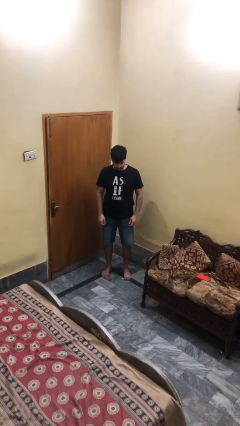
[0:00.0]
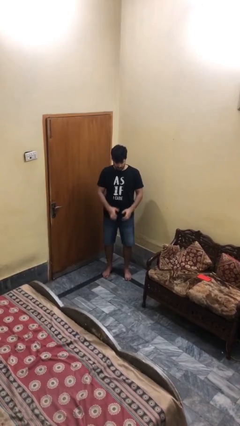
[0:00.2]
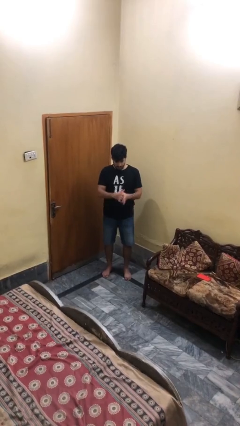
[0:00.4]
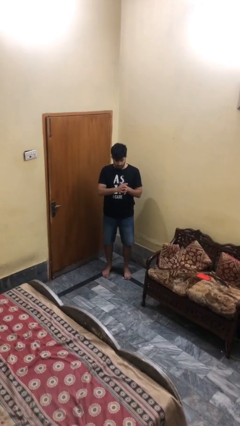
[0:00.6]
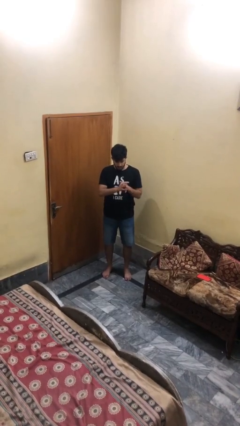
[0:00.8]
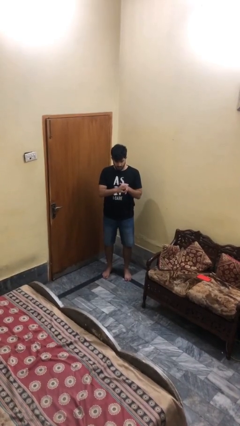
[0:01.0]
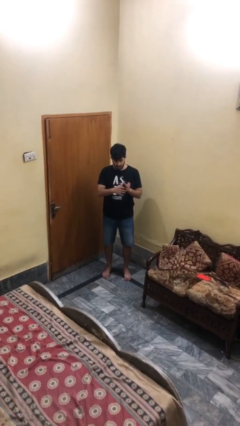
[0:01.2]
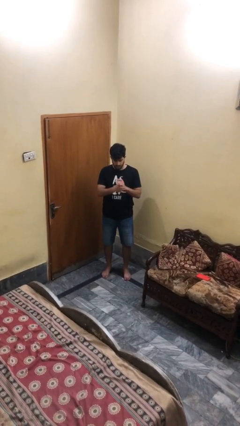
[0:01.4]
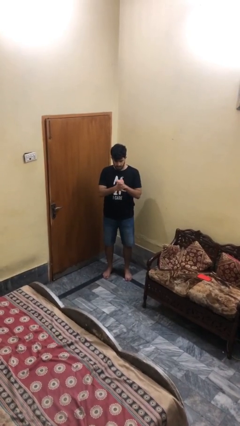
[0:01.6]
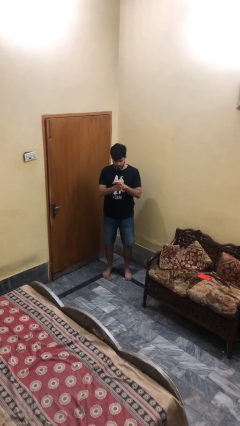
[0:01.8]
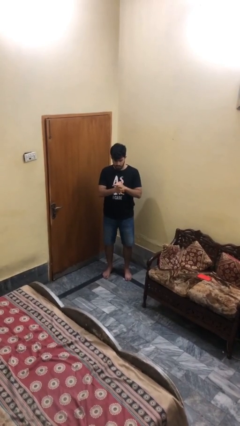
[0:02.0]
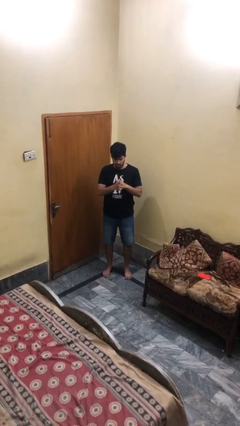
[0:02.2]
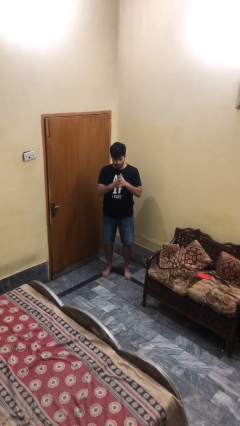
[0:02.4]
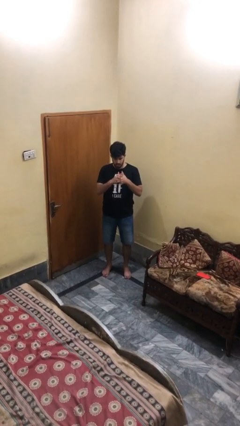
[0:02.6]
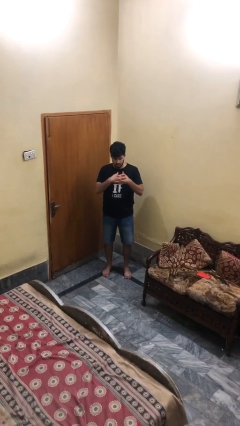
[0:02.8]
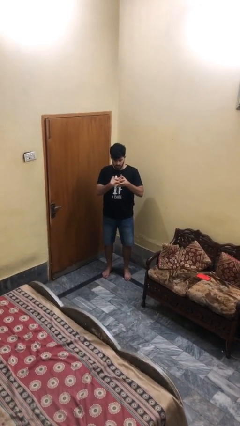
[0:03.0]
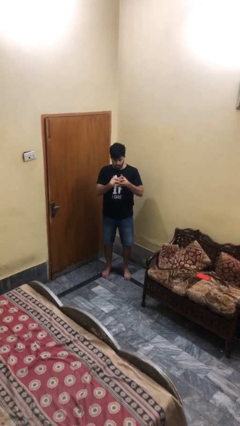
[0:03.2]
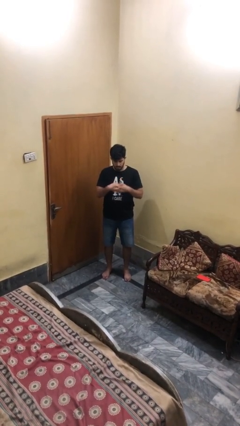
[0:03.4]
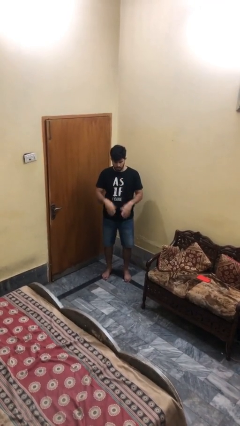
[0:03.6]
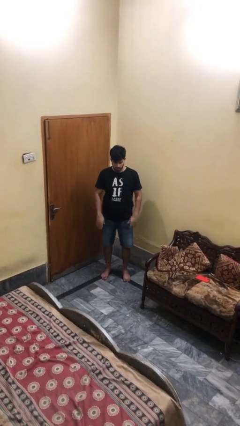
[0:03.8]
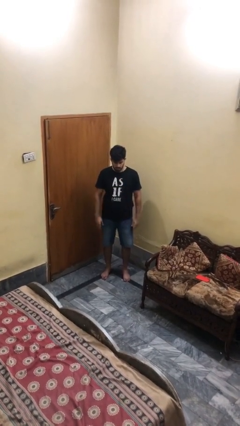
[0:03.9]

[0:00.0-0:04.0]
person cracks knuckles

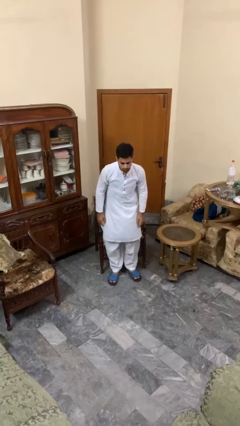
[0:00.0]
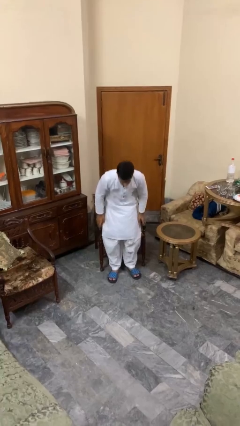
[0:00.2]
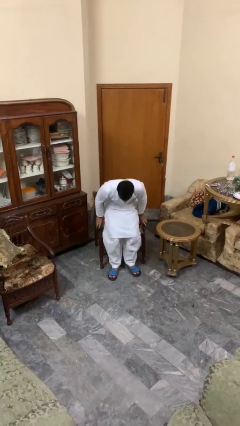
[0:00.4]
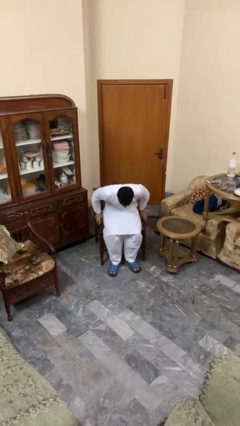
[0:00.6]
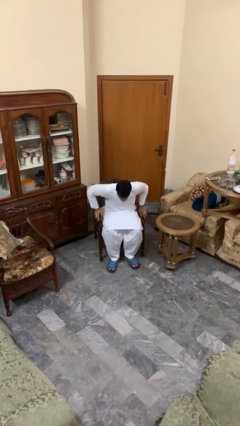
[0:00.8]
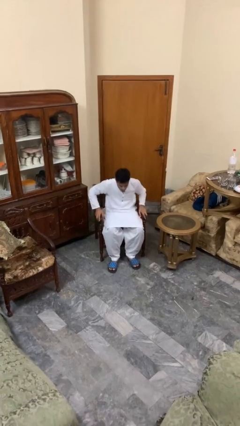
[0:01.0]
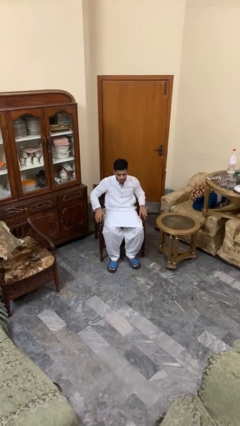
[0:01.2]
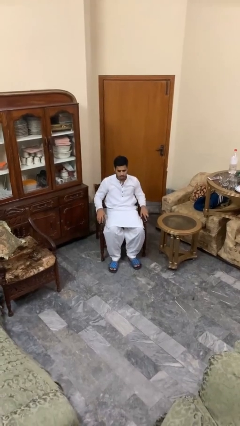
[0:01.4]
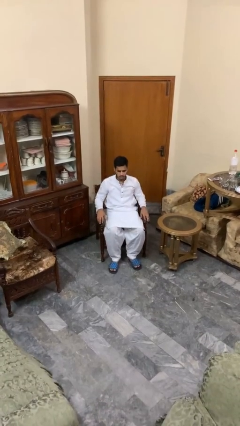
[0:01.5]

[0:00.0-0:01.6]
person sits down

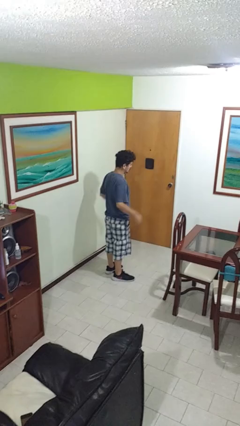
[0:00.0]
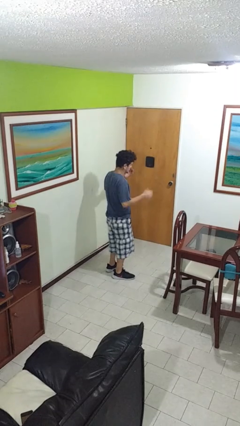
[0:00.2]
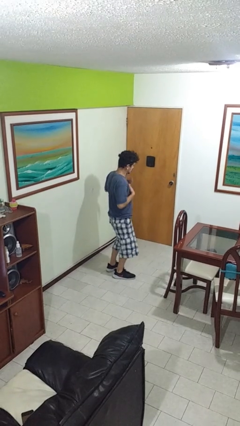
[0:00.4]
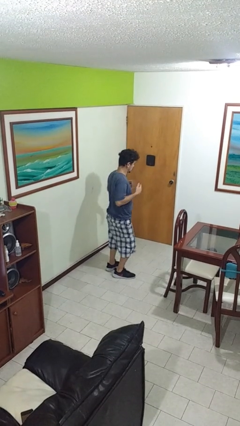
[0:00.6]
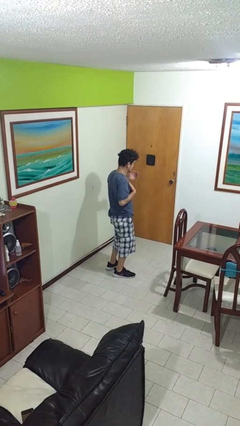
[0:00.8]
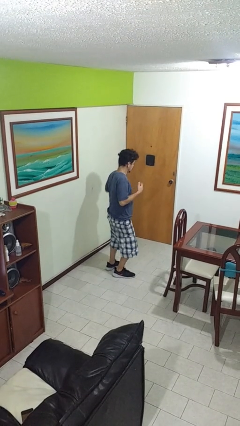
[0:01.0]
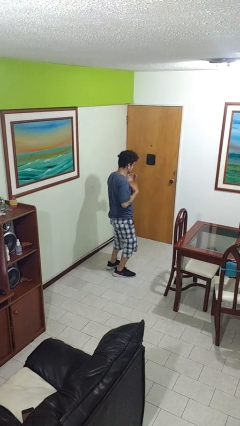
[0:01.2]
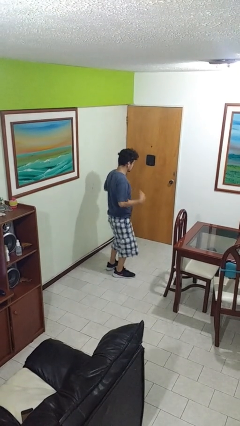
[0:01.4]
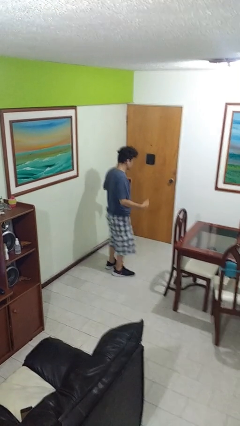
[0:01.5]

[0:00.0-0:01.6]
person drums on chest

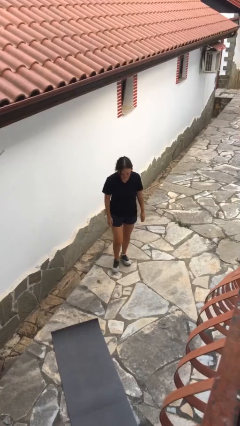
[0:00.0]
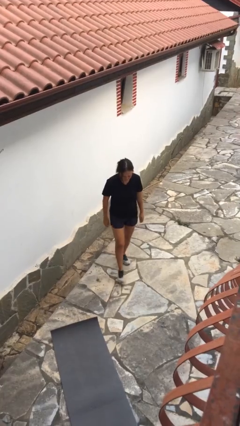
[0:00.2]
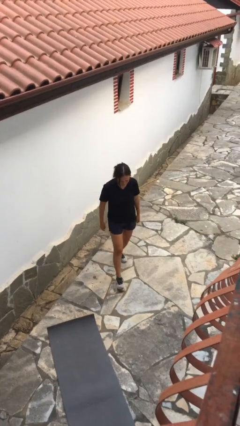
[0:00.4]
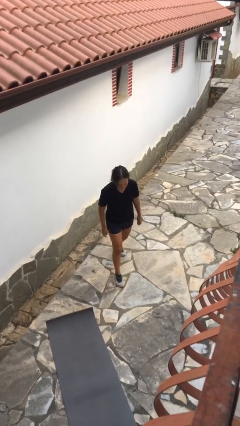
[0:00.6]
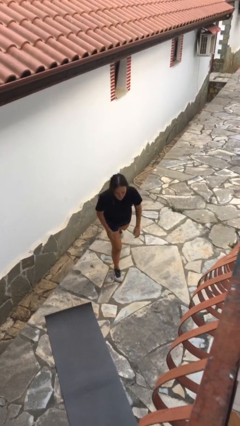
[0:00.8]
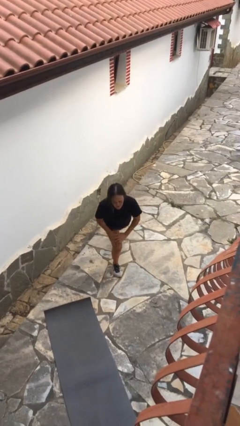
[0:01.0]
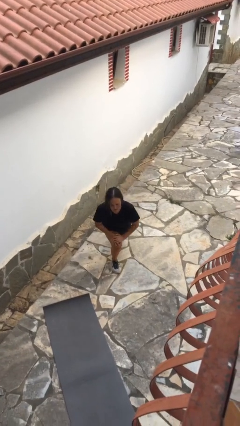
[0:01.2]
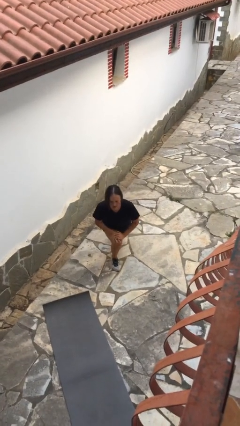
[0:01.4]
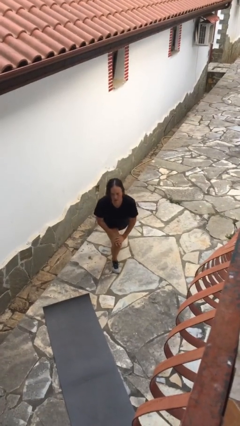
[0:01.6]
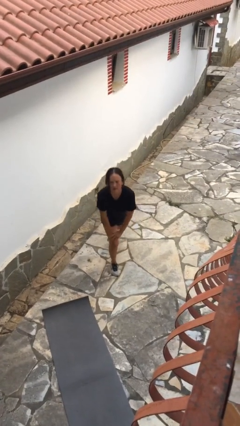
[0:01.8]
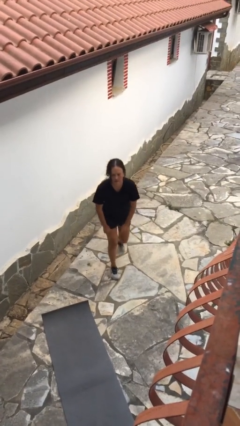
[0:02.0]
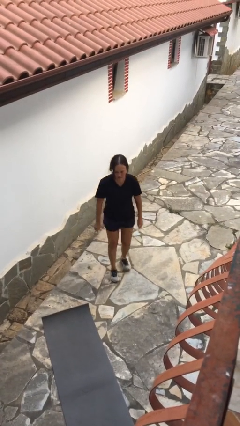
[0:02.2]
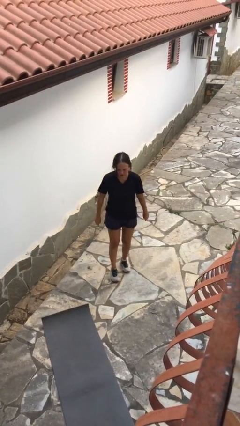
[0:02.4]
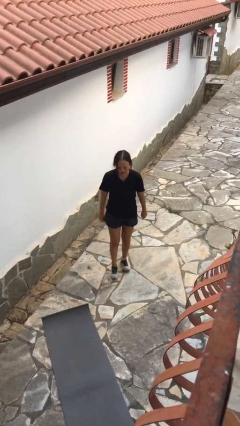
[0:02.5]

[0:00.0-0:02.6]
person exercises with lunges

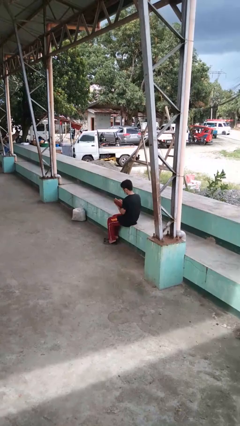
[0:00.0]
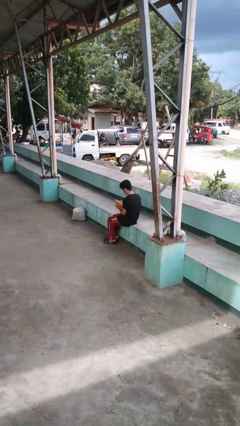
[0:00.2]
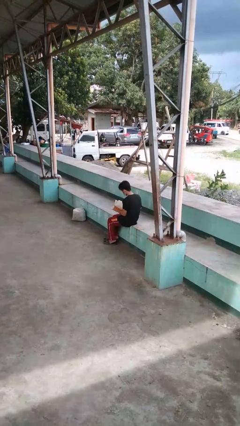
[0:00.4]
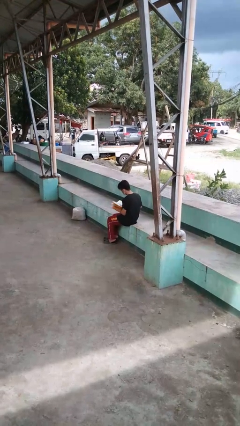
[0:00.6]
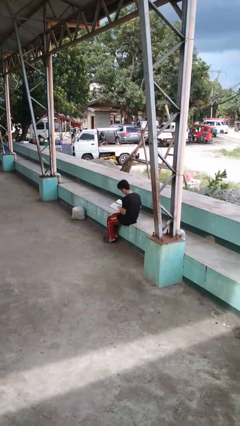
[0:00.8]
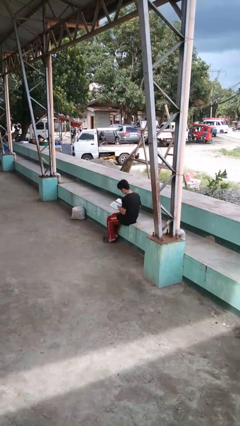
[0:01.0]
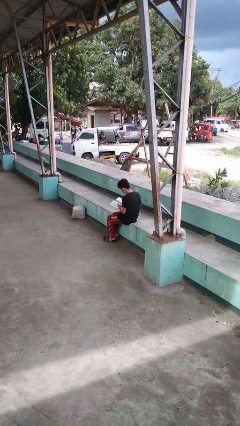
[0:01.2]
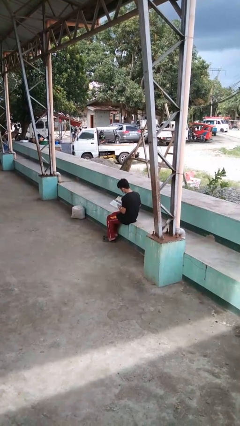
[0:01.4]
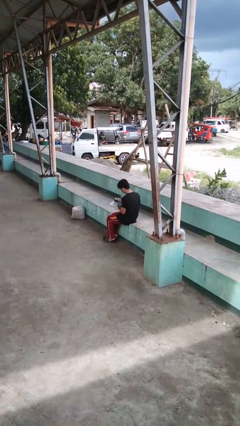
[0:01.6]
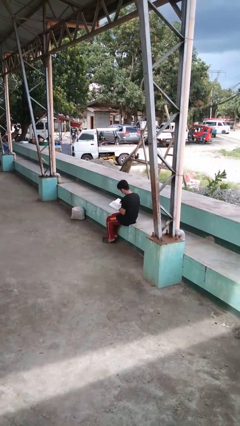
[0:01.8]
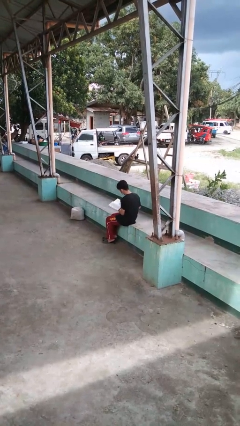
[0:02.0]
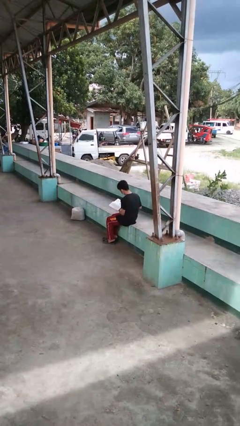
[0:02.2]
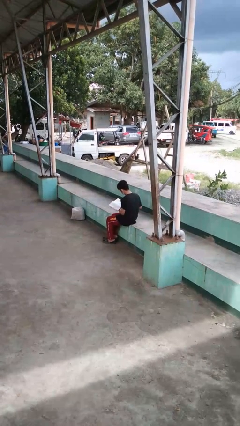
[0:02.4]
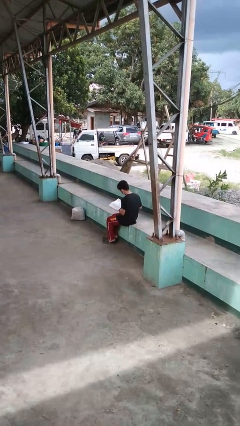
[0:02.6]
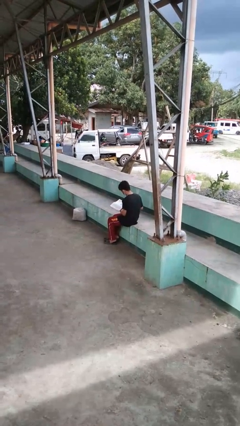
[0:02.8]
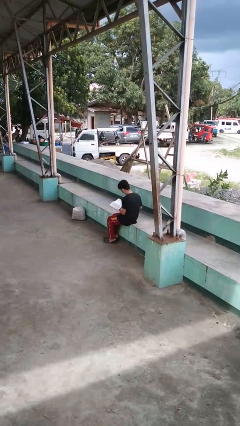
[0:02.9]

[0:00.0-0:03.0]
person reads book

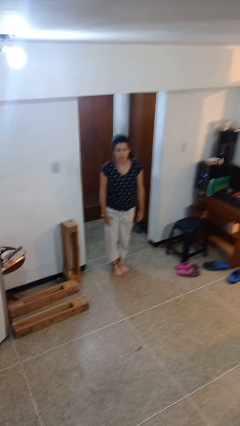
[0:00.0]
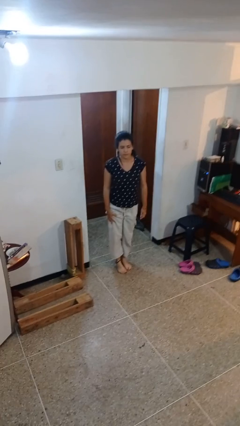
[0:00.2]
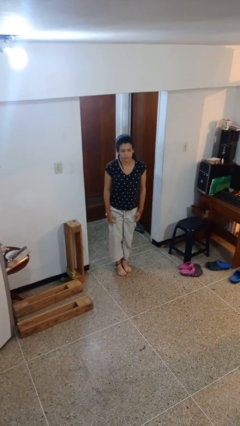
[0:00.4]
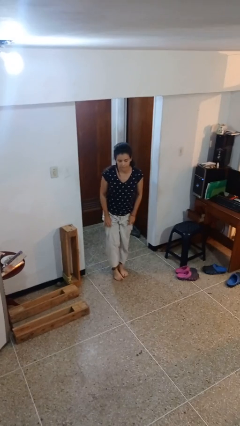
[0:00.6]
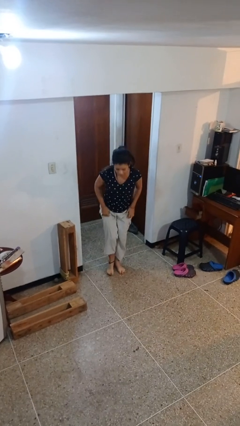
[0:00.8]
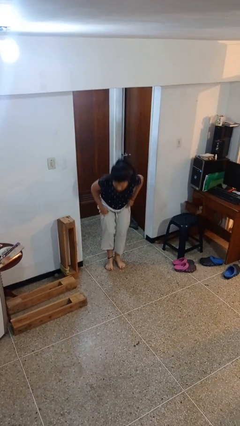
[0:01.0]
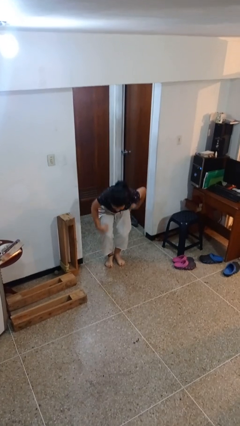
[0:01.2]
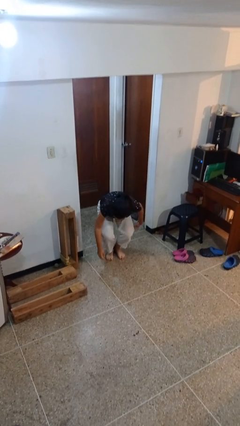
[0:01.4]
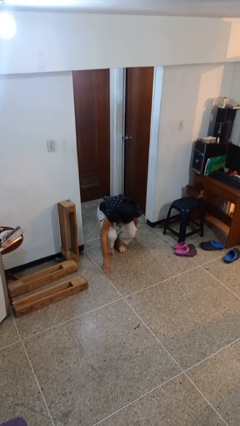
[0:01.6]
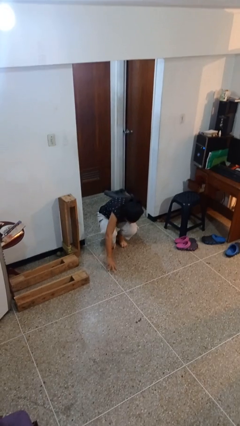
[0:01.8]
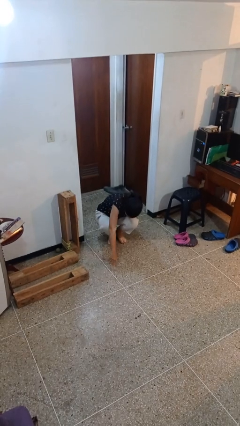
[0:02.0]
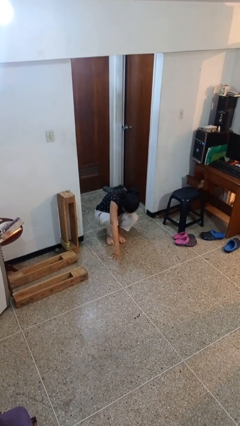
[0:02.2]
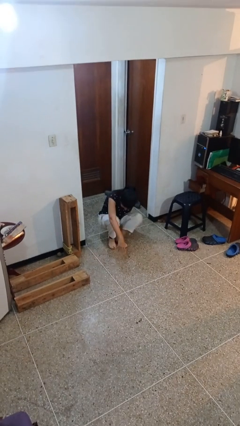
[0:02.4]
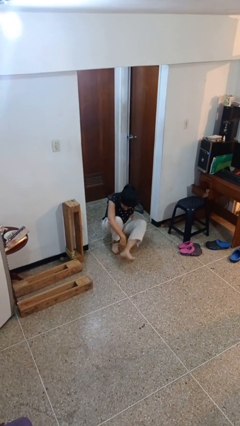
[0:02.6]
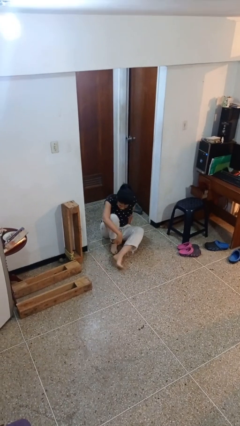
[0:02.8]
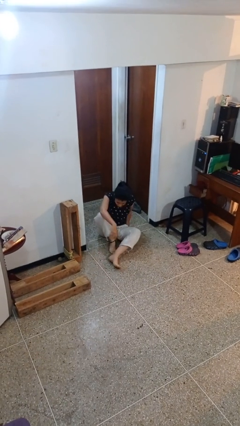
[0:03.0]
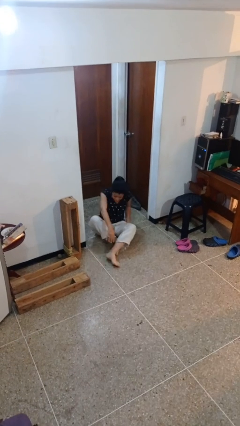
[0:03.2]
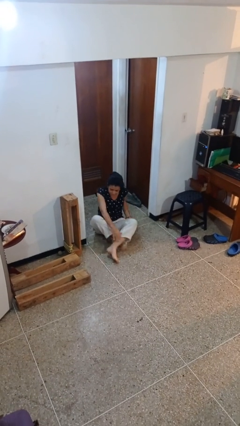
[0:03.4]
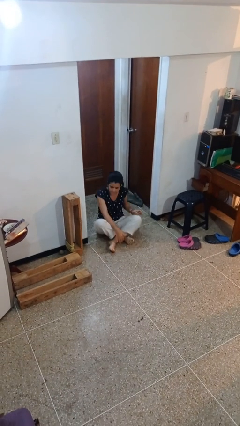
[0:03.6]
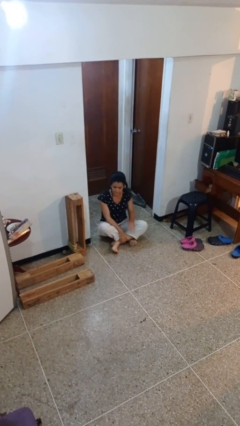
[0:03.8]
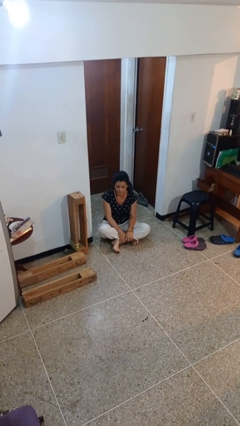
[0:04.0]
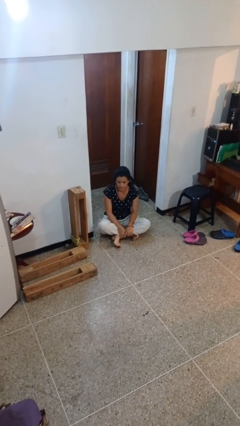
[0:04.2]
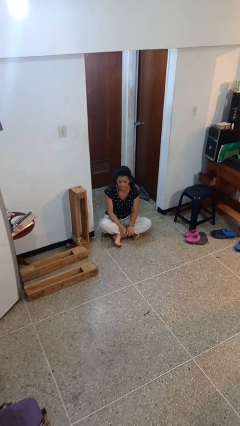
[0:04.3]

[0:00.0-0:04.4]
person sits crisscross

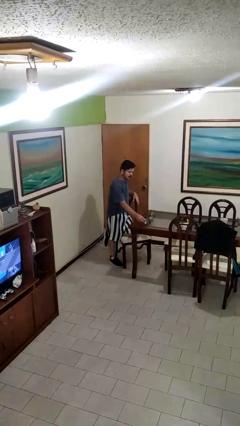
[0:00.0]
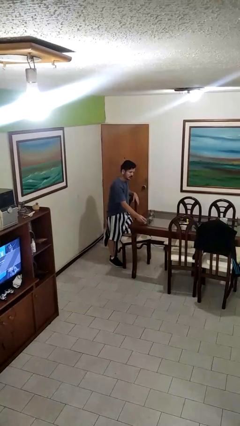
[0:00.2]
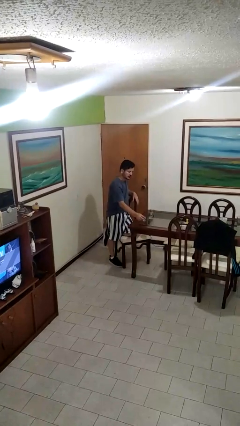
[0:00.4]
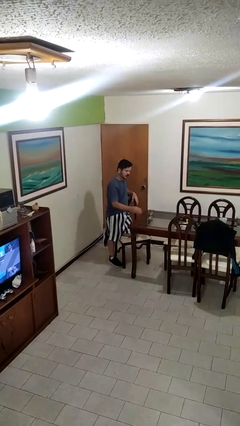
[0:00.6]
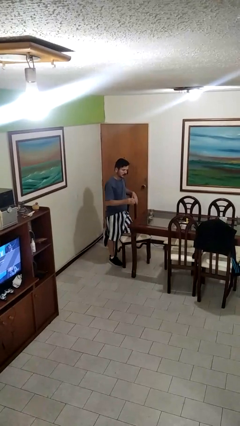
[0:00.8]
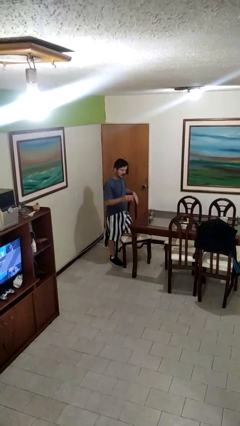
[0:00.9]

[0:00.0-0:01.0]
person picks up object from table
